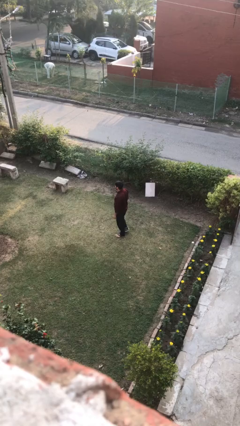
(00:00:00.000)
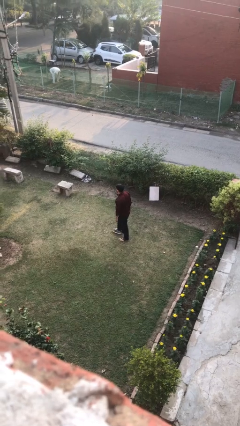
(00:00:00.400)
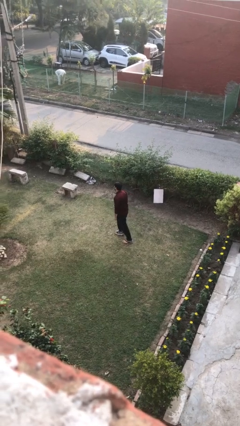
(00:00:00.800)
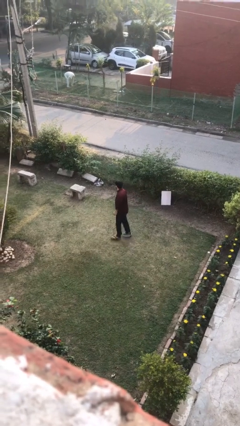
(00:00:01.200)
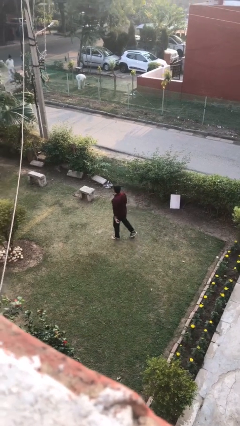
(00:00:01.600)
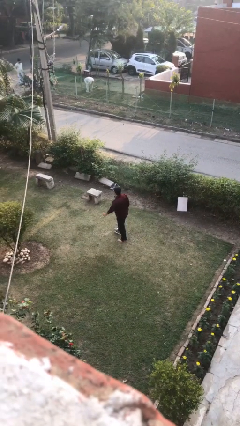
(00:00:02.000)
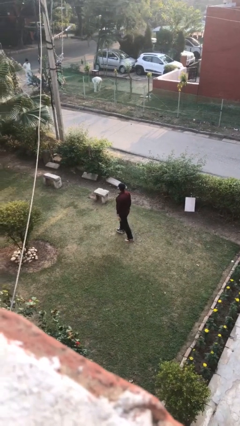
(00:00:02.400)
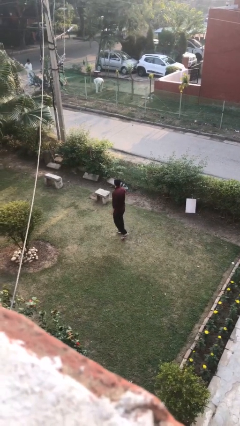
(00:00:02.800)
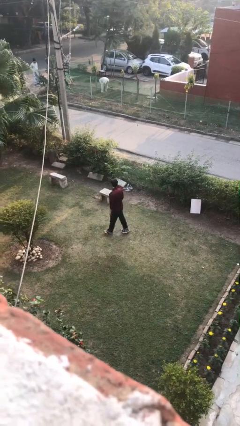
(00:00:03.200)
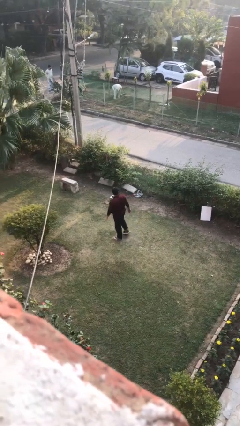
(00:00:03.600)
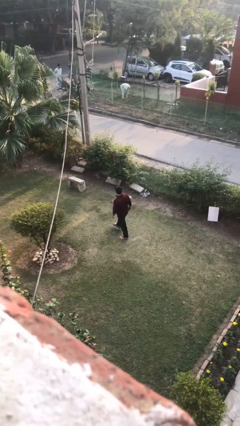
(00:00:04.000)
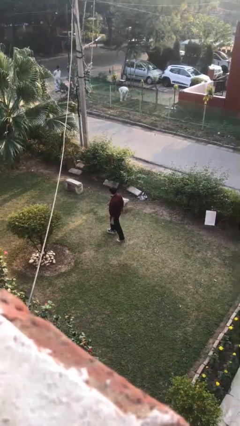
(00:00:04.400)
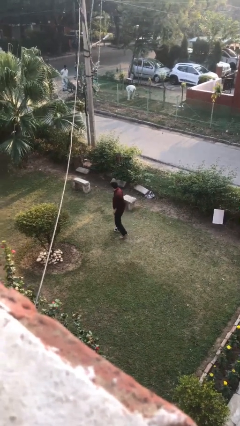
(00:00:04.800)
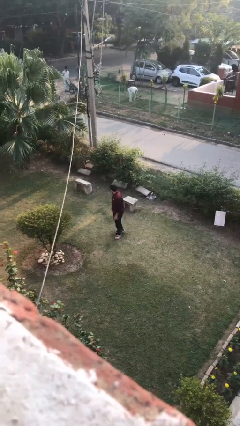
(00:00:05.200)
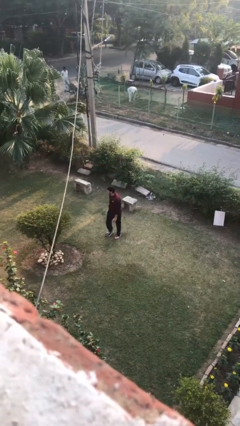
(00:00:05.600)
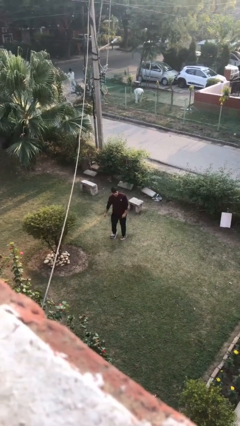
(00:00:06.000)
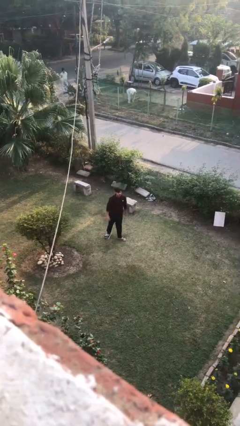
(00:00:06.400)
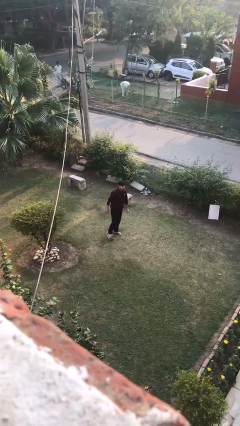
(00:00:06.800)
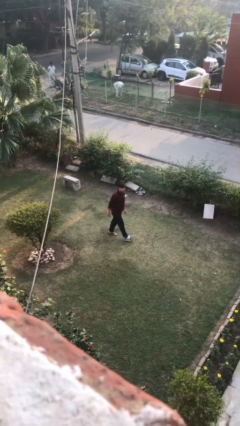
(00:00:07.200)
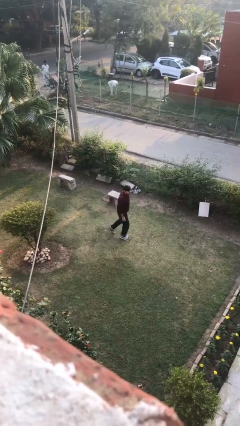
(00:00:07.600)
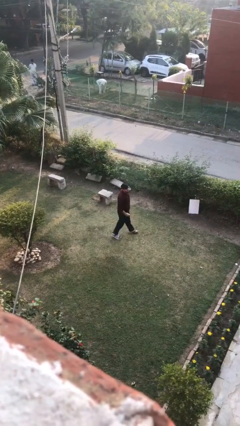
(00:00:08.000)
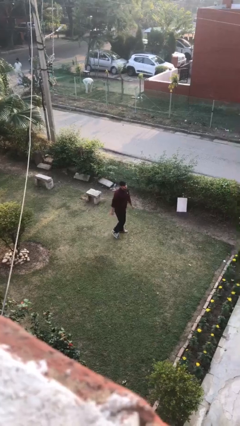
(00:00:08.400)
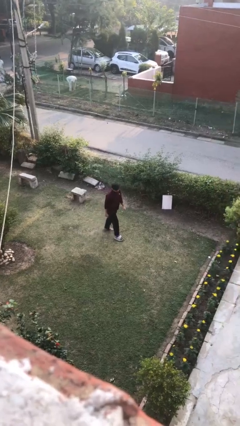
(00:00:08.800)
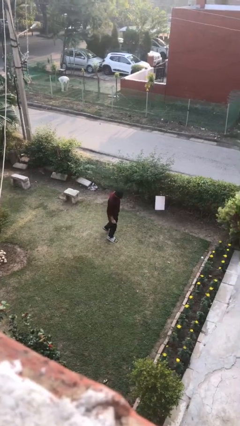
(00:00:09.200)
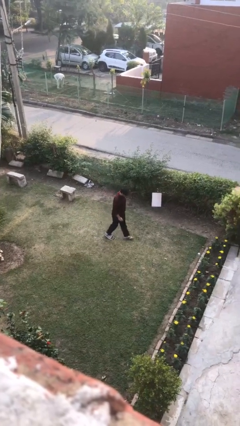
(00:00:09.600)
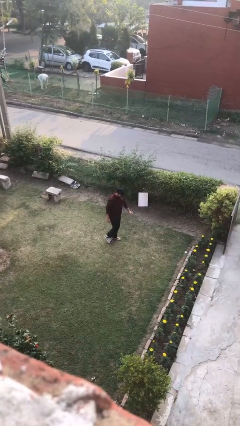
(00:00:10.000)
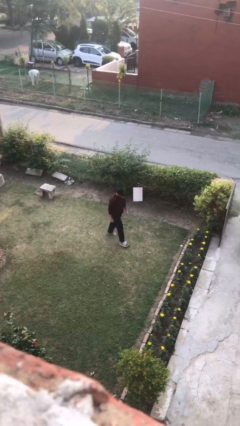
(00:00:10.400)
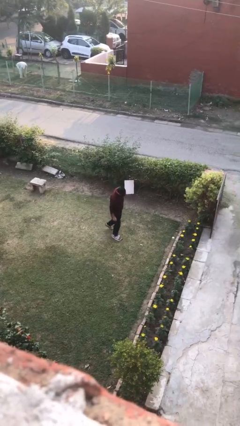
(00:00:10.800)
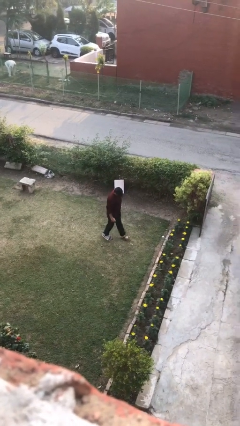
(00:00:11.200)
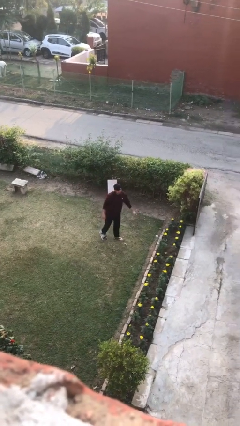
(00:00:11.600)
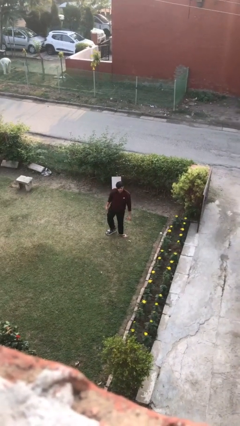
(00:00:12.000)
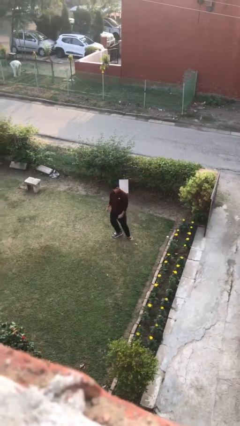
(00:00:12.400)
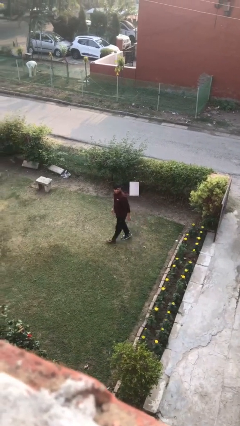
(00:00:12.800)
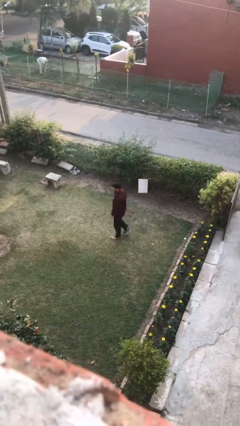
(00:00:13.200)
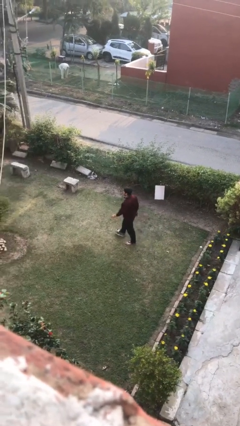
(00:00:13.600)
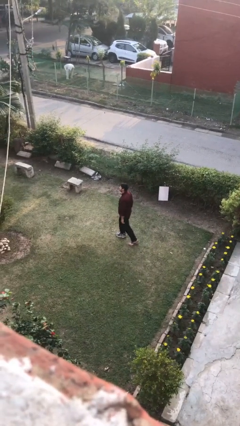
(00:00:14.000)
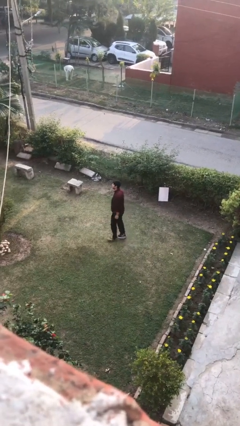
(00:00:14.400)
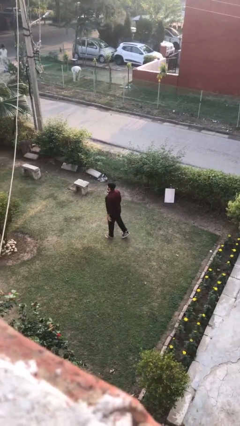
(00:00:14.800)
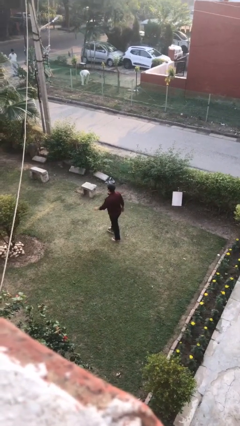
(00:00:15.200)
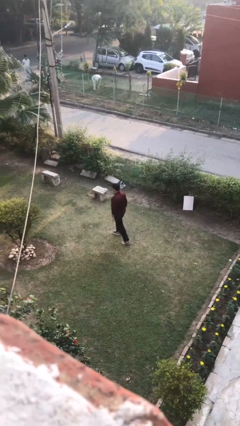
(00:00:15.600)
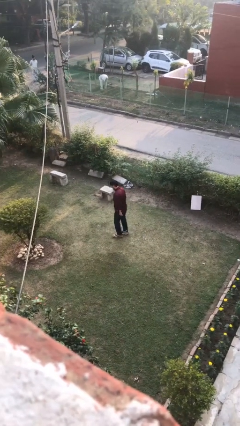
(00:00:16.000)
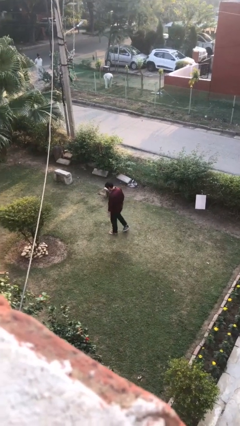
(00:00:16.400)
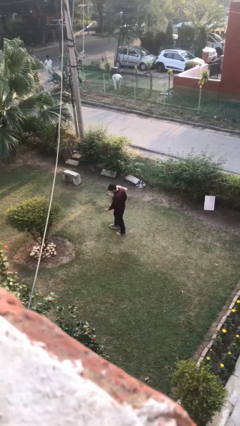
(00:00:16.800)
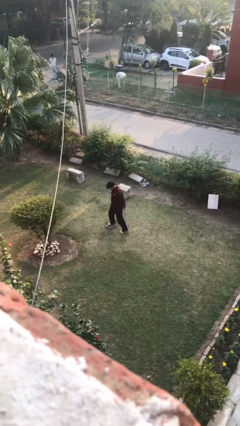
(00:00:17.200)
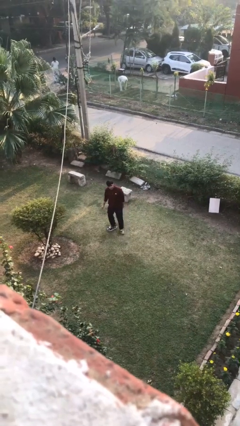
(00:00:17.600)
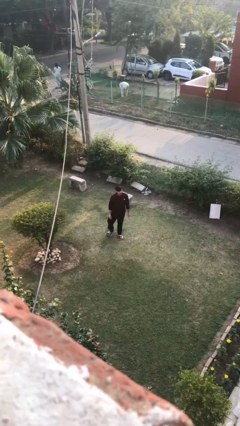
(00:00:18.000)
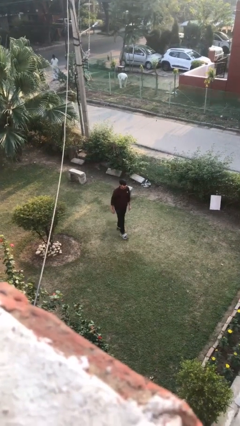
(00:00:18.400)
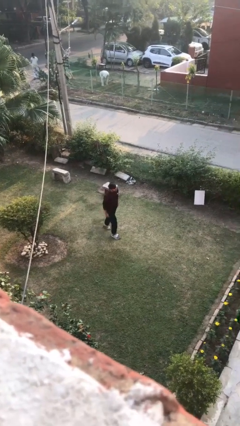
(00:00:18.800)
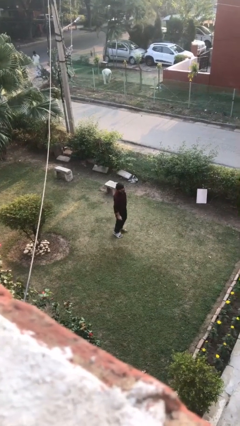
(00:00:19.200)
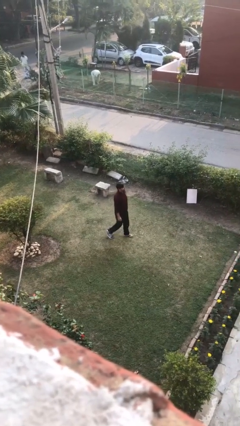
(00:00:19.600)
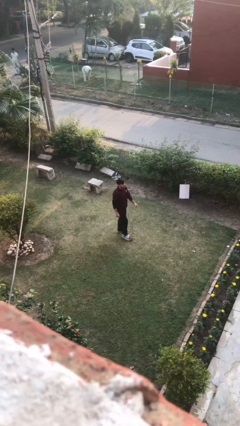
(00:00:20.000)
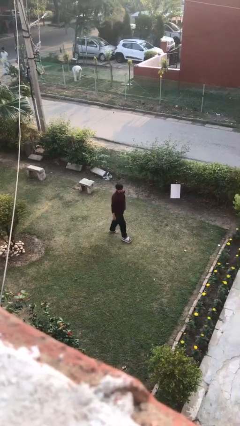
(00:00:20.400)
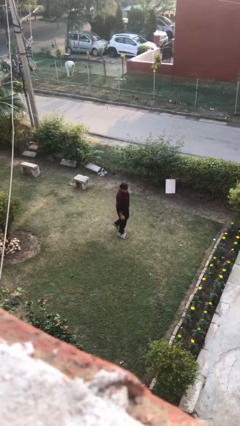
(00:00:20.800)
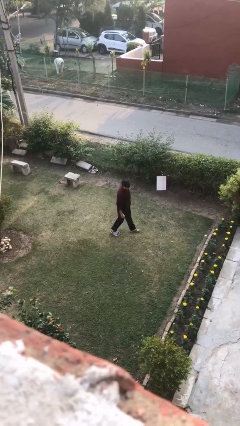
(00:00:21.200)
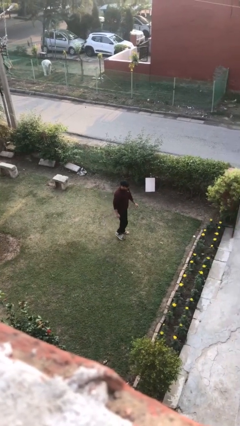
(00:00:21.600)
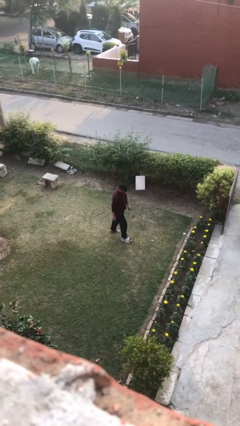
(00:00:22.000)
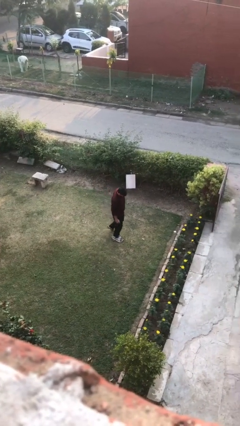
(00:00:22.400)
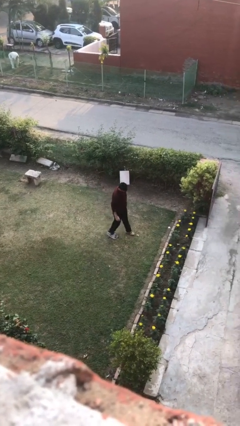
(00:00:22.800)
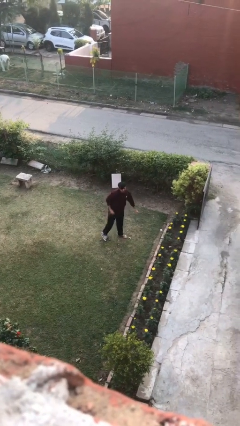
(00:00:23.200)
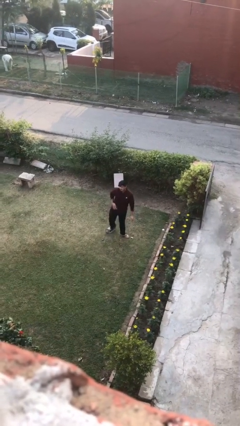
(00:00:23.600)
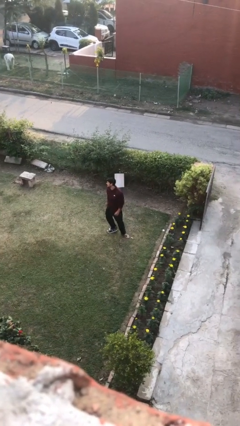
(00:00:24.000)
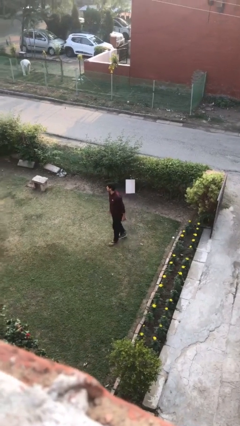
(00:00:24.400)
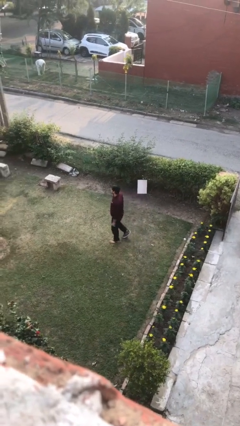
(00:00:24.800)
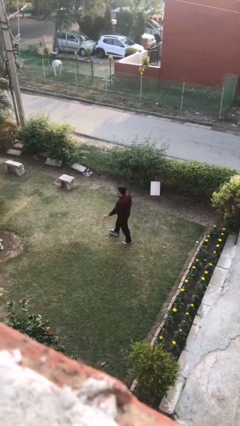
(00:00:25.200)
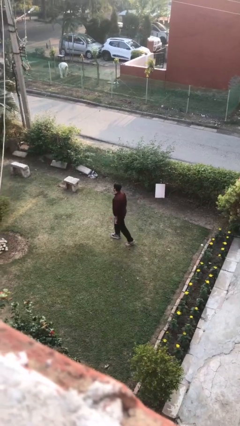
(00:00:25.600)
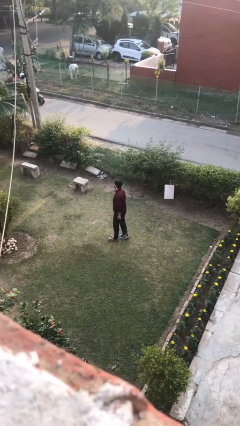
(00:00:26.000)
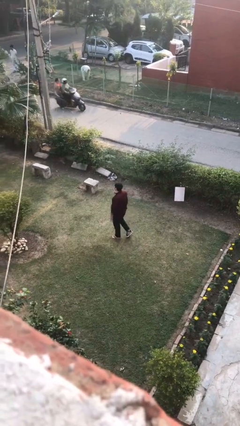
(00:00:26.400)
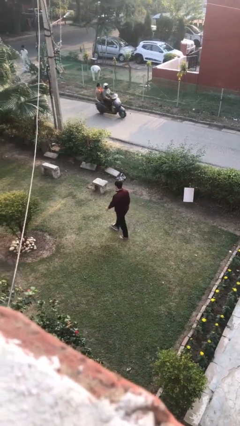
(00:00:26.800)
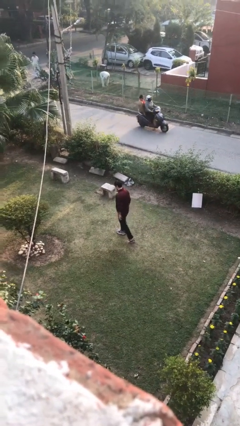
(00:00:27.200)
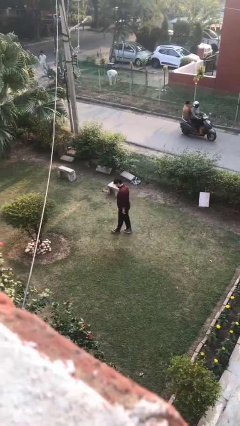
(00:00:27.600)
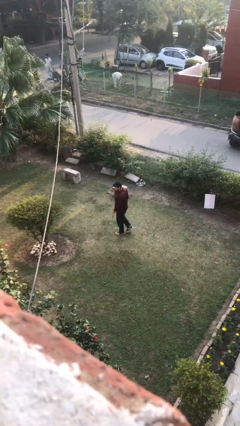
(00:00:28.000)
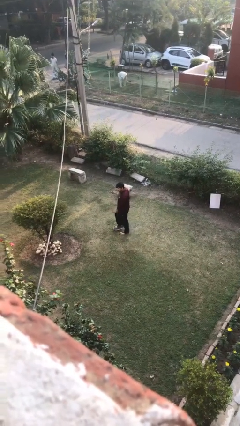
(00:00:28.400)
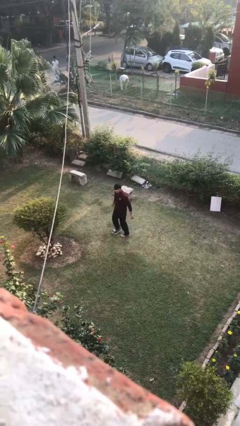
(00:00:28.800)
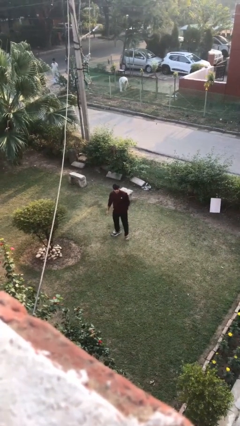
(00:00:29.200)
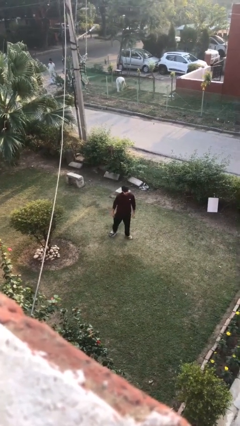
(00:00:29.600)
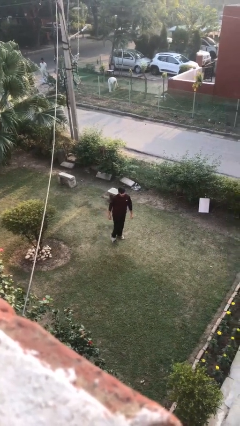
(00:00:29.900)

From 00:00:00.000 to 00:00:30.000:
person walks

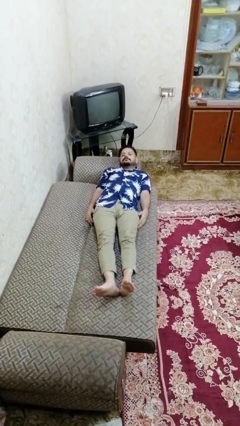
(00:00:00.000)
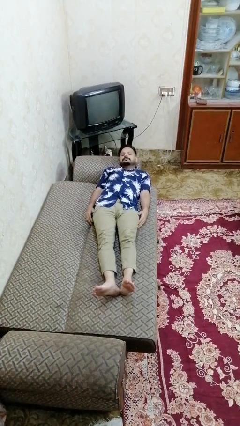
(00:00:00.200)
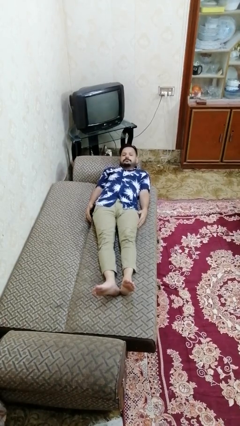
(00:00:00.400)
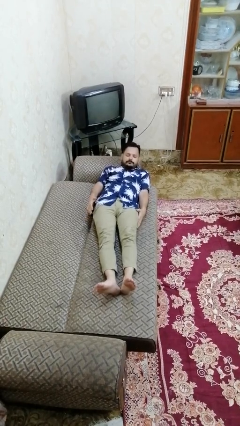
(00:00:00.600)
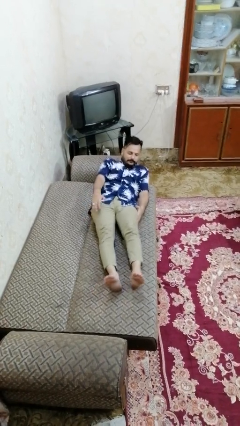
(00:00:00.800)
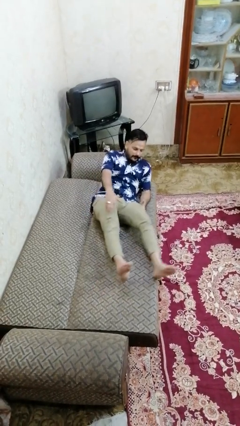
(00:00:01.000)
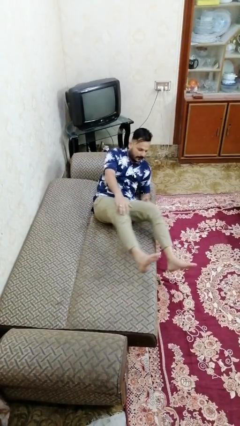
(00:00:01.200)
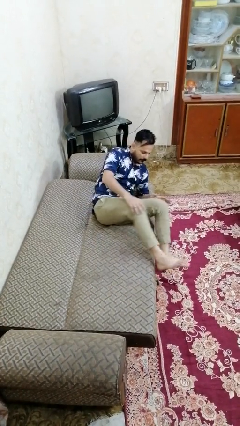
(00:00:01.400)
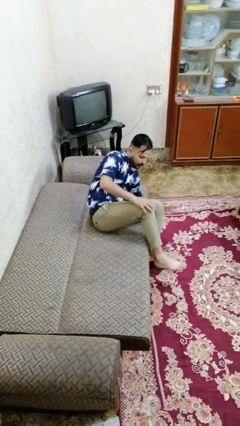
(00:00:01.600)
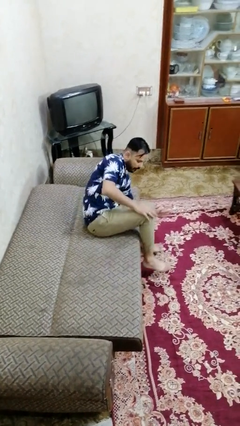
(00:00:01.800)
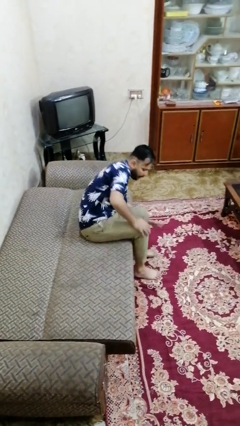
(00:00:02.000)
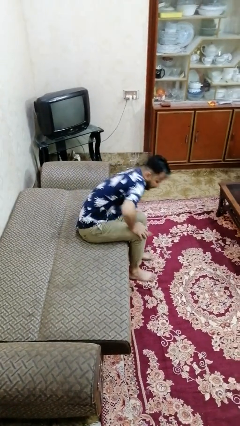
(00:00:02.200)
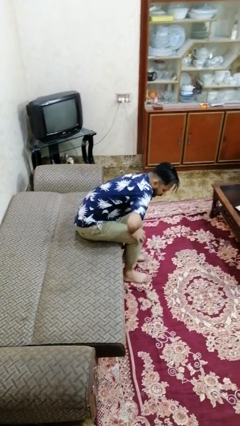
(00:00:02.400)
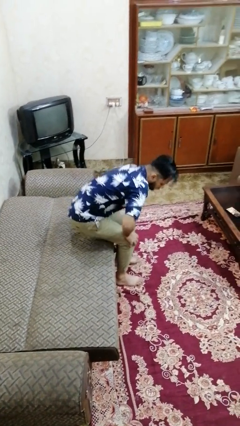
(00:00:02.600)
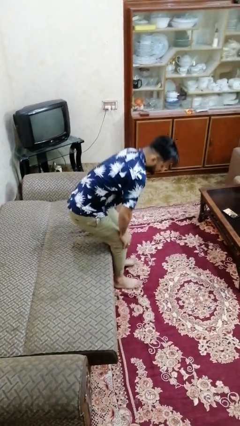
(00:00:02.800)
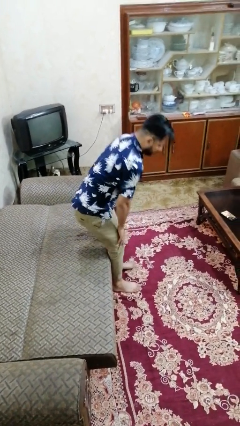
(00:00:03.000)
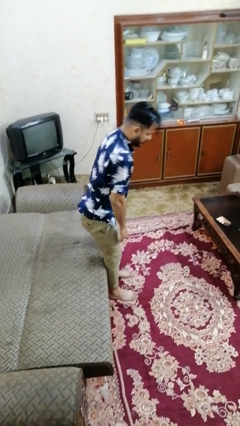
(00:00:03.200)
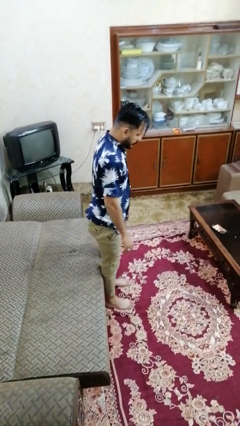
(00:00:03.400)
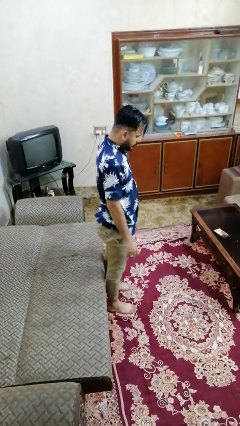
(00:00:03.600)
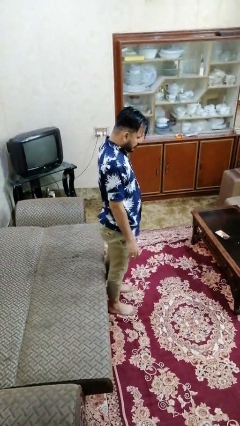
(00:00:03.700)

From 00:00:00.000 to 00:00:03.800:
person stands up
